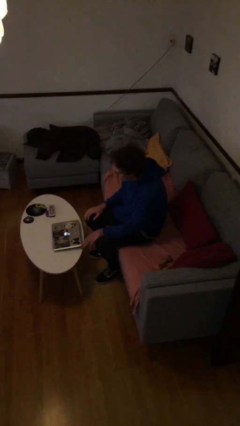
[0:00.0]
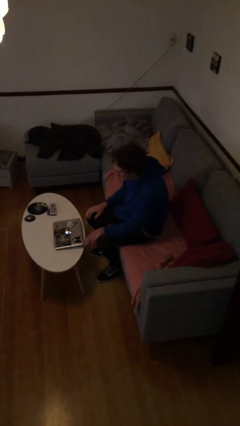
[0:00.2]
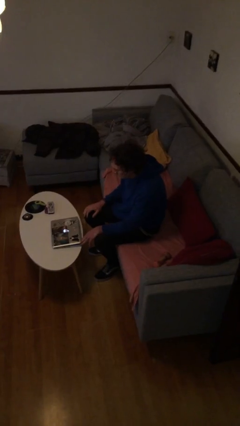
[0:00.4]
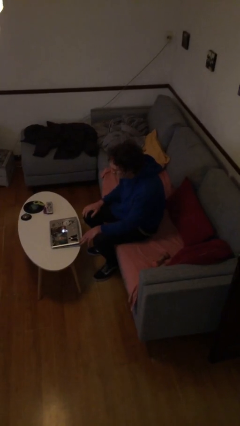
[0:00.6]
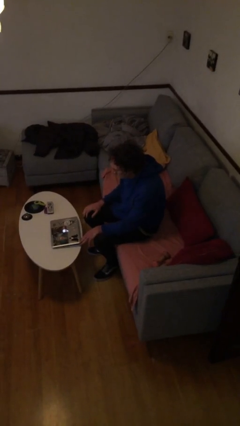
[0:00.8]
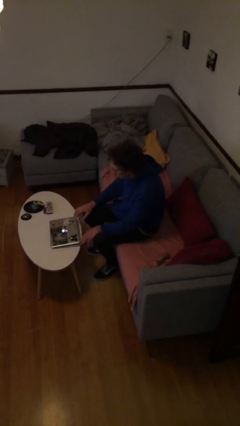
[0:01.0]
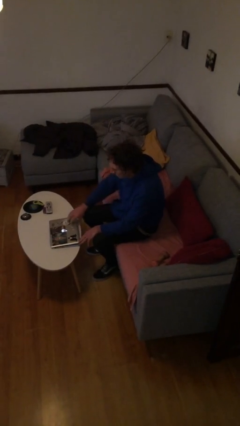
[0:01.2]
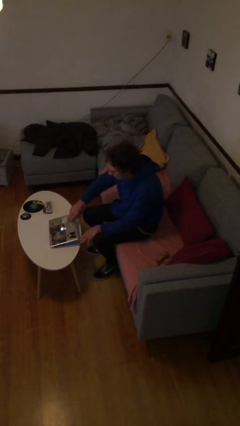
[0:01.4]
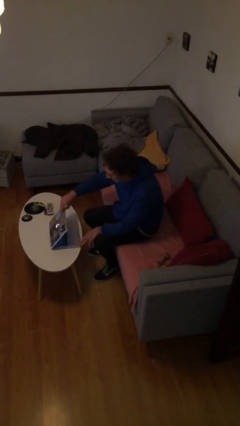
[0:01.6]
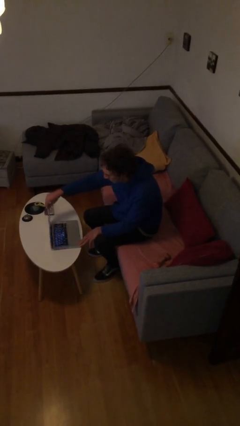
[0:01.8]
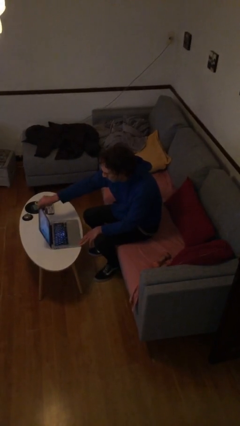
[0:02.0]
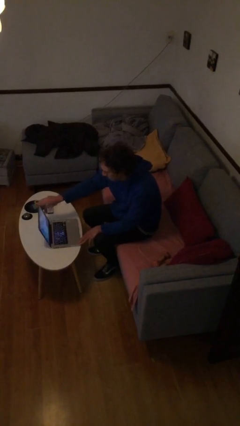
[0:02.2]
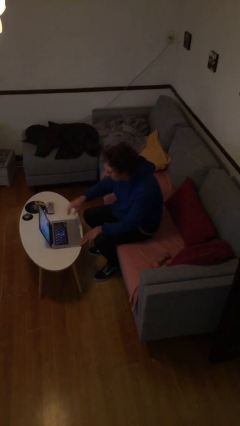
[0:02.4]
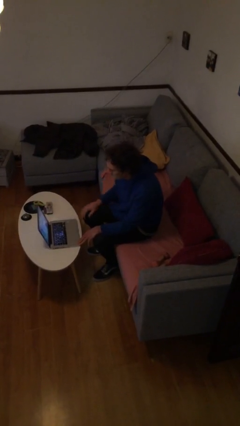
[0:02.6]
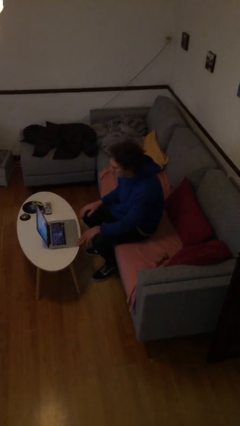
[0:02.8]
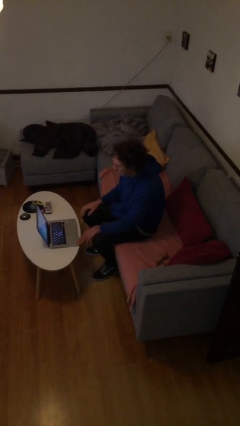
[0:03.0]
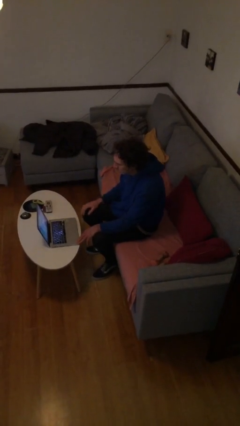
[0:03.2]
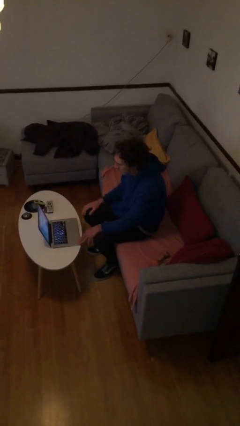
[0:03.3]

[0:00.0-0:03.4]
person opens laptop

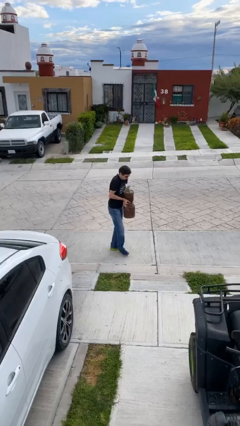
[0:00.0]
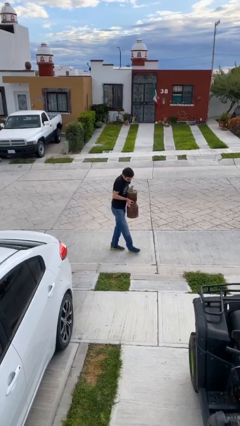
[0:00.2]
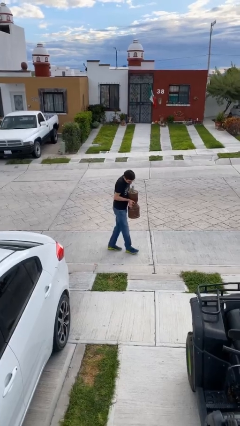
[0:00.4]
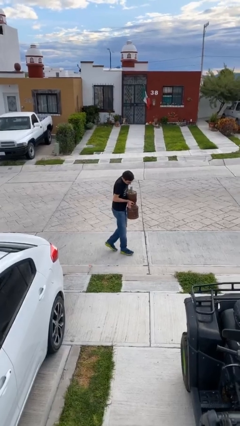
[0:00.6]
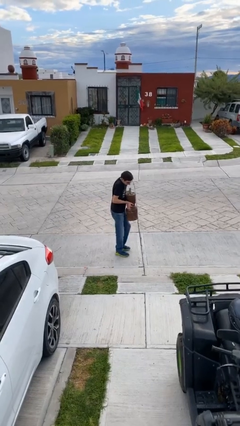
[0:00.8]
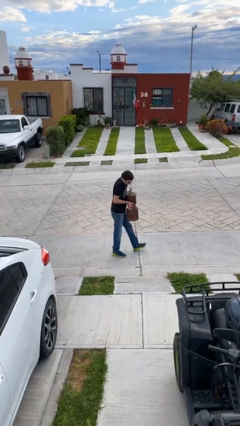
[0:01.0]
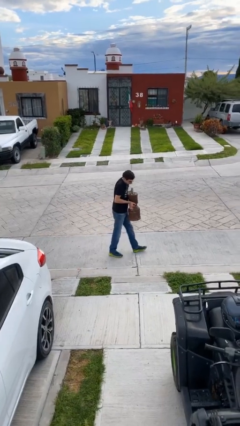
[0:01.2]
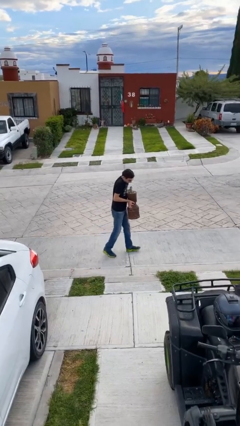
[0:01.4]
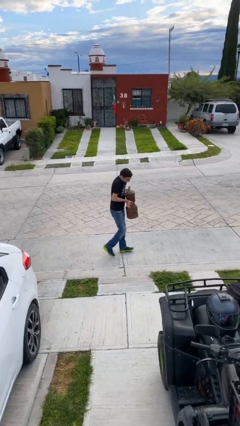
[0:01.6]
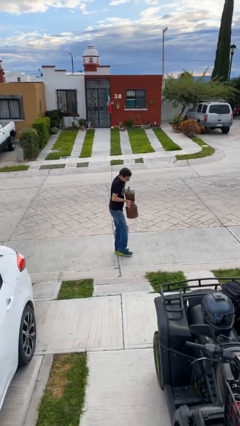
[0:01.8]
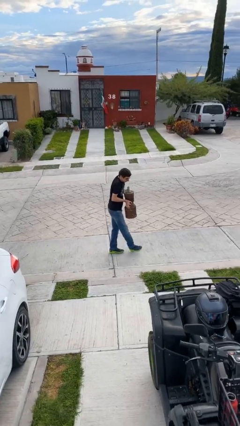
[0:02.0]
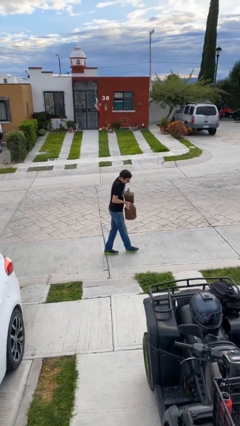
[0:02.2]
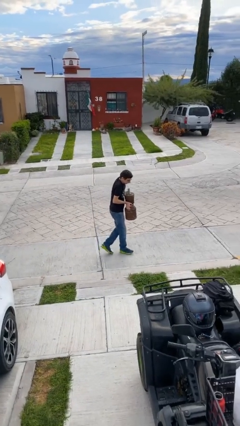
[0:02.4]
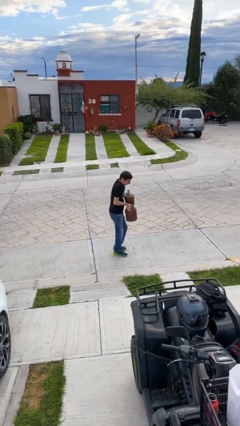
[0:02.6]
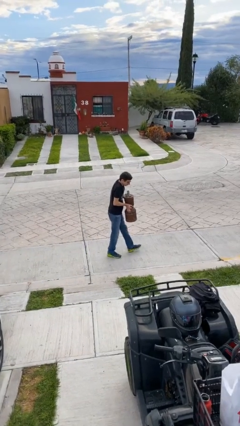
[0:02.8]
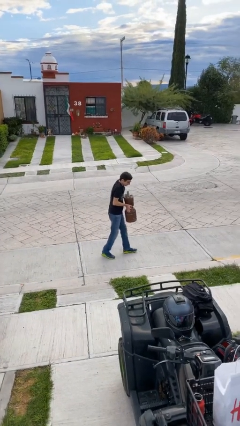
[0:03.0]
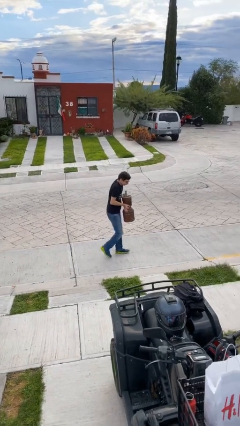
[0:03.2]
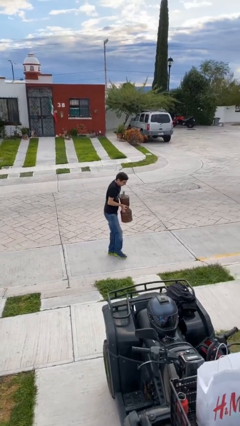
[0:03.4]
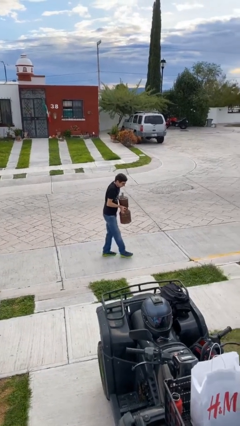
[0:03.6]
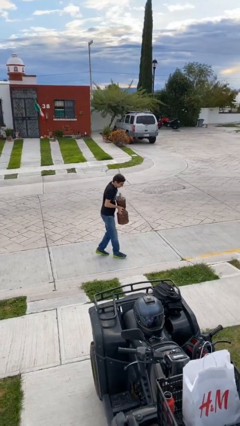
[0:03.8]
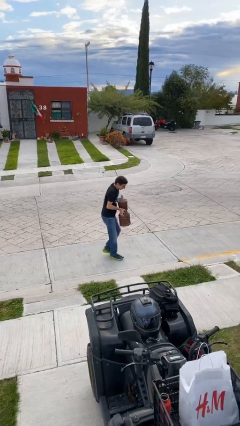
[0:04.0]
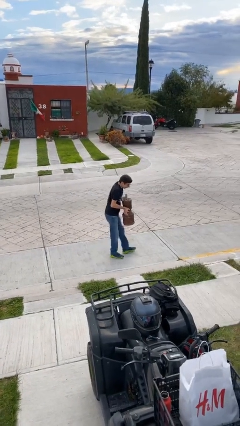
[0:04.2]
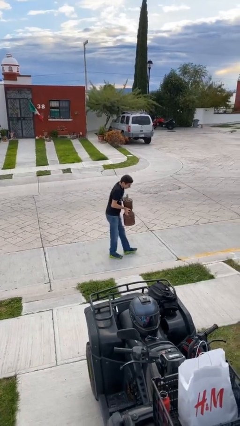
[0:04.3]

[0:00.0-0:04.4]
person carries heavy object

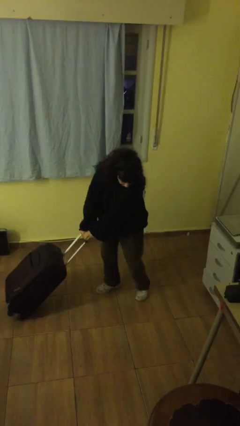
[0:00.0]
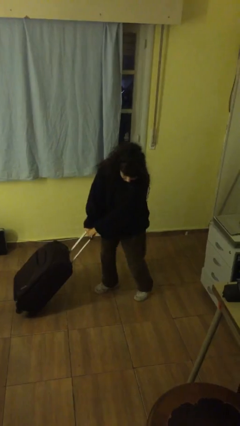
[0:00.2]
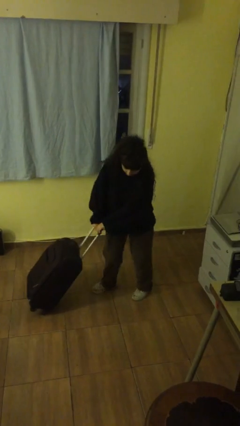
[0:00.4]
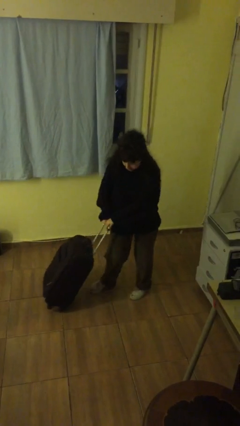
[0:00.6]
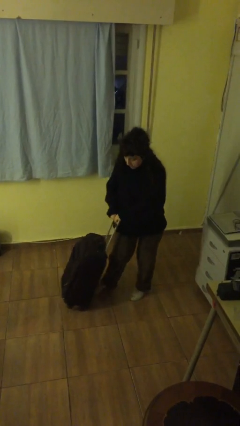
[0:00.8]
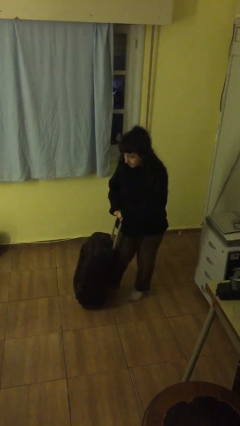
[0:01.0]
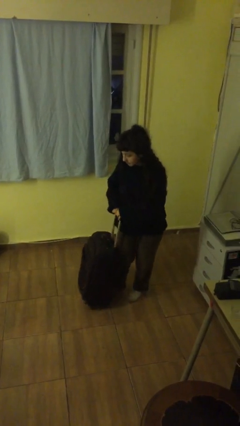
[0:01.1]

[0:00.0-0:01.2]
person pulls wheeled cart

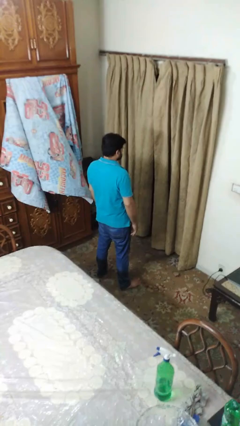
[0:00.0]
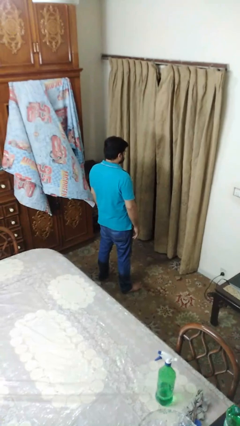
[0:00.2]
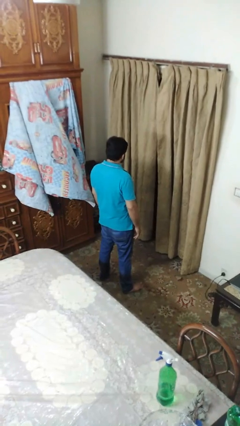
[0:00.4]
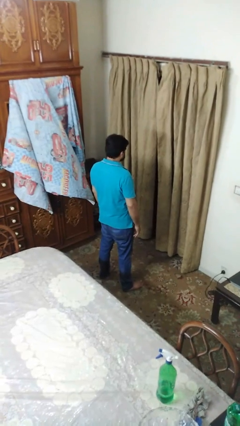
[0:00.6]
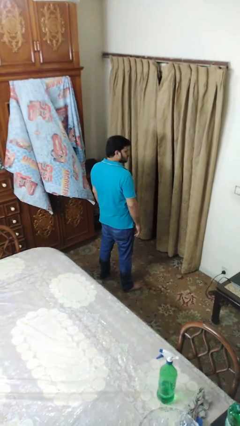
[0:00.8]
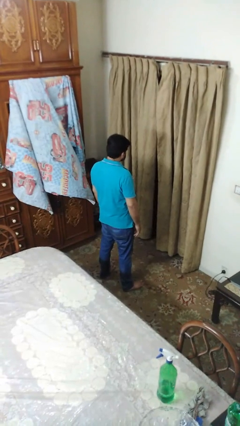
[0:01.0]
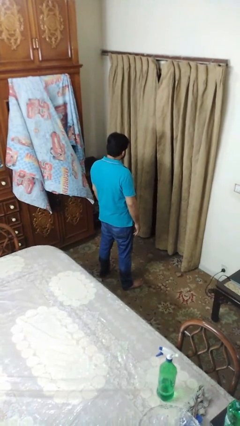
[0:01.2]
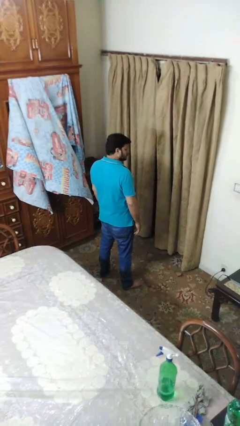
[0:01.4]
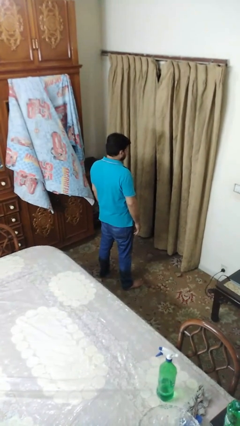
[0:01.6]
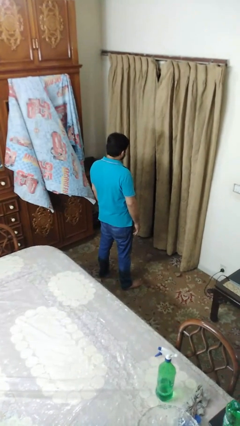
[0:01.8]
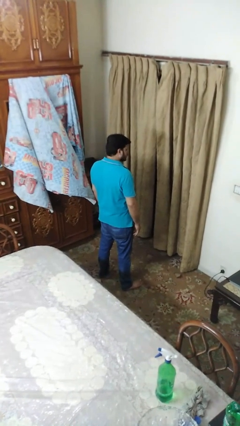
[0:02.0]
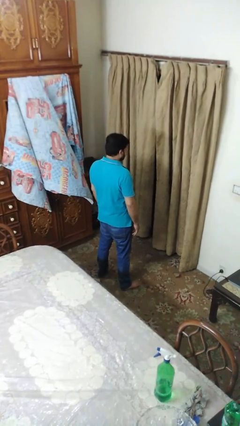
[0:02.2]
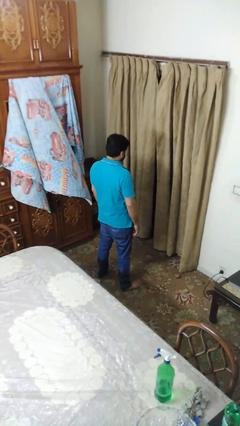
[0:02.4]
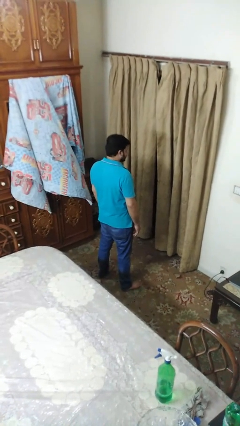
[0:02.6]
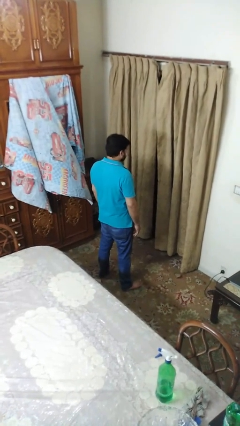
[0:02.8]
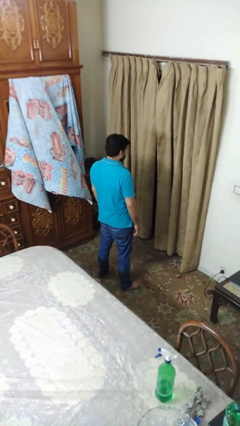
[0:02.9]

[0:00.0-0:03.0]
person shakes head

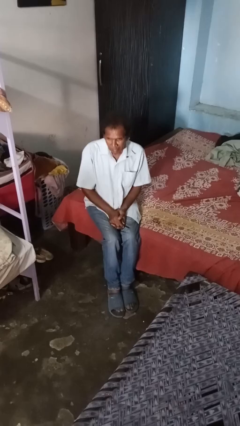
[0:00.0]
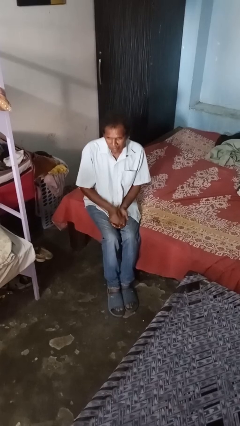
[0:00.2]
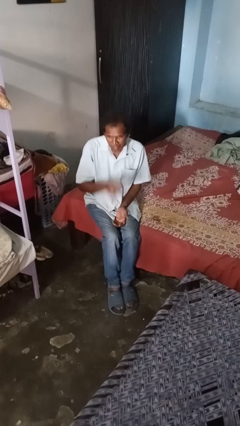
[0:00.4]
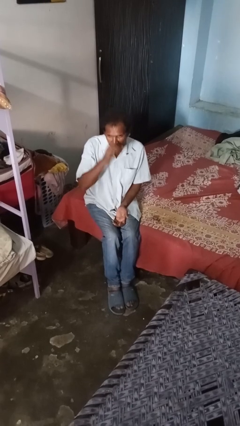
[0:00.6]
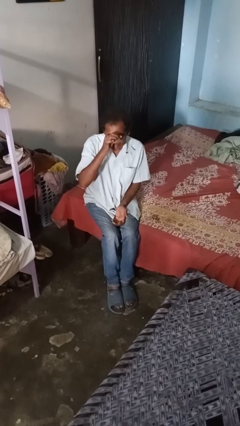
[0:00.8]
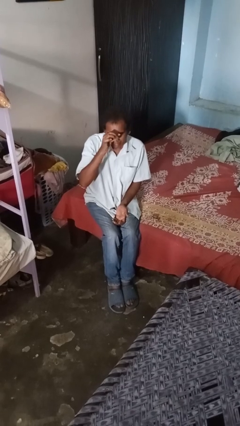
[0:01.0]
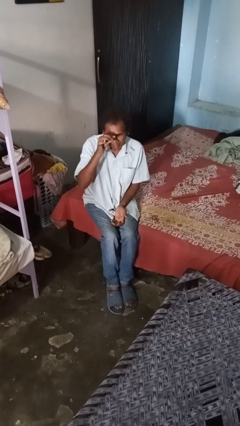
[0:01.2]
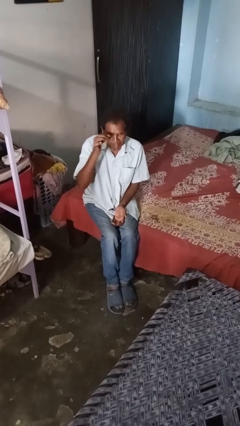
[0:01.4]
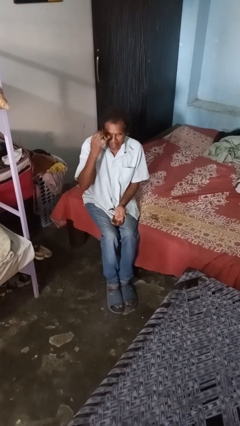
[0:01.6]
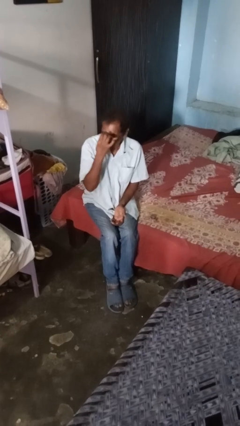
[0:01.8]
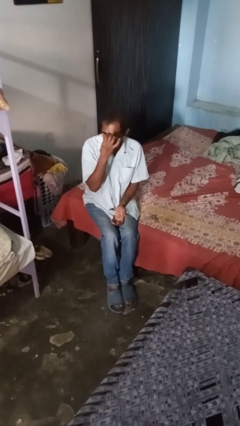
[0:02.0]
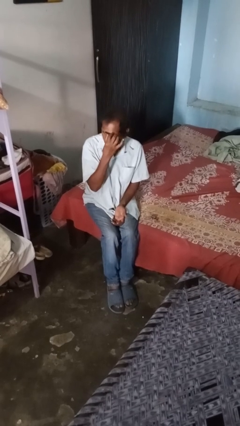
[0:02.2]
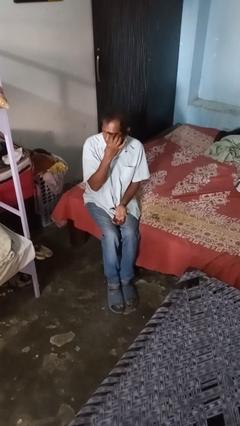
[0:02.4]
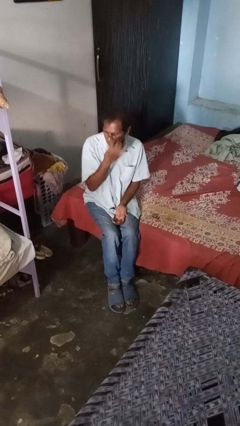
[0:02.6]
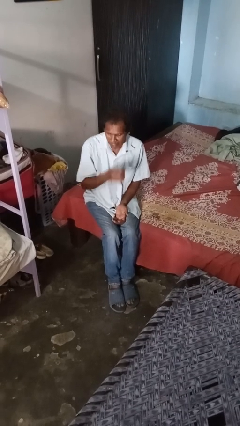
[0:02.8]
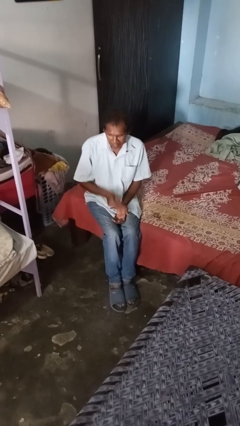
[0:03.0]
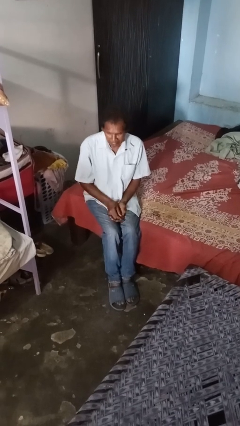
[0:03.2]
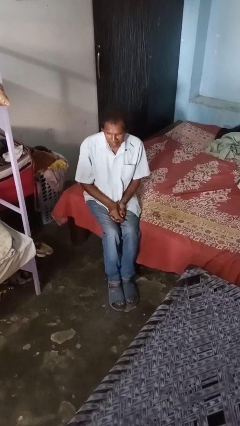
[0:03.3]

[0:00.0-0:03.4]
person applies eye makeup

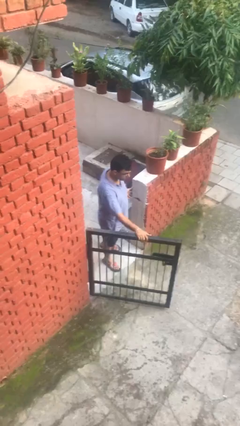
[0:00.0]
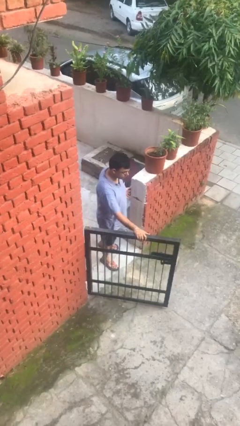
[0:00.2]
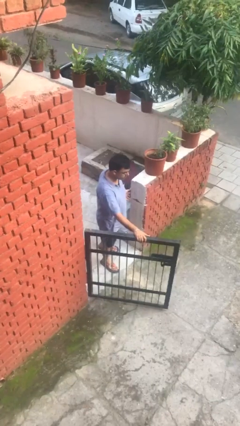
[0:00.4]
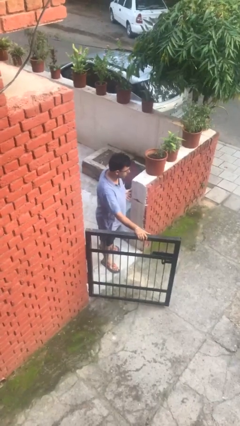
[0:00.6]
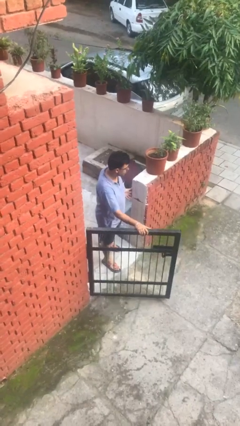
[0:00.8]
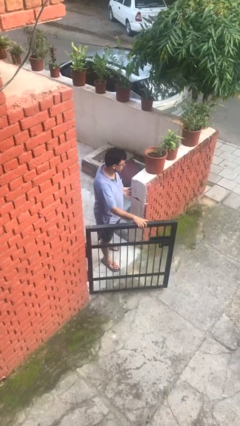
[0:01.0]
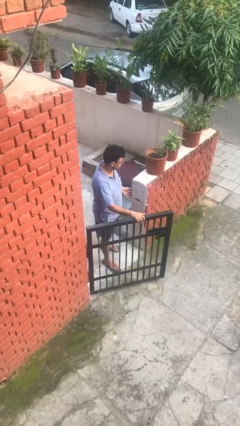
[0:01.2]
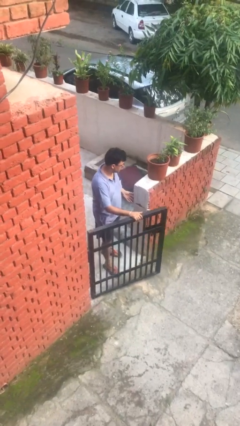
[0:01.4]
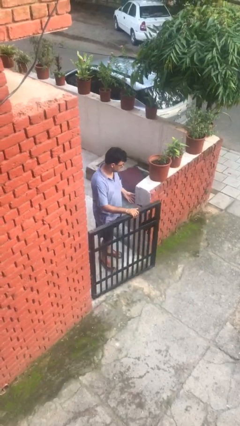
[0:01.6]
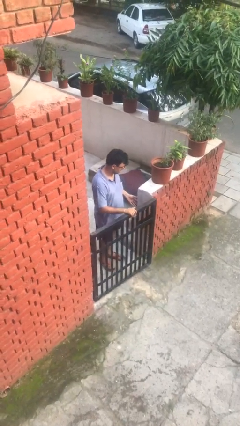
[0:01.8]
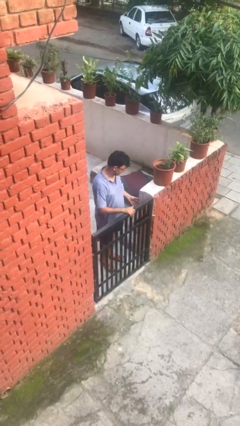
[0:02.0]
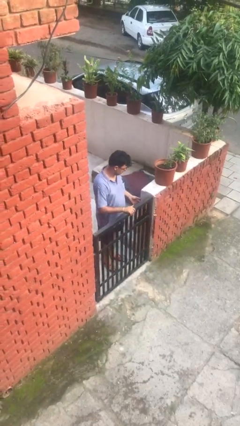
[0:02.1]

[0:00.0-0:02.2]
person closes gate
